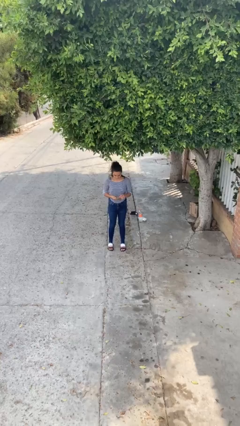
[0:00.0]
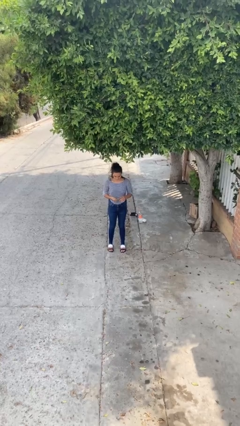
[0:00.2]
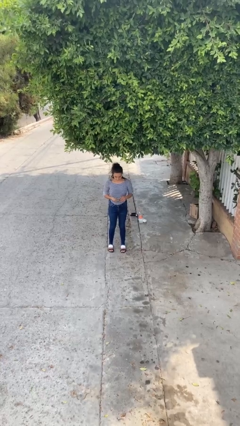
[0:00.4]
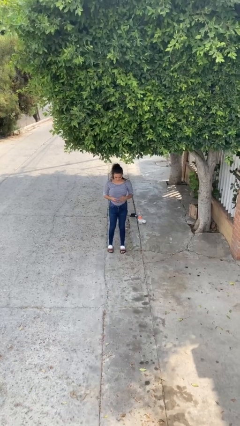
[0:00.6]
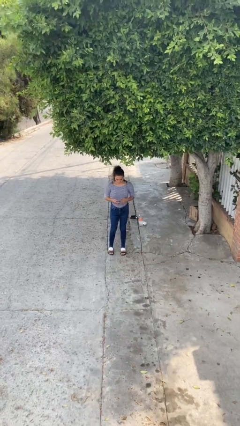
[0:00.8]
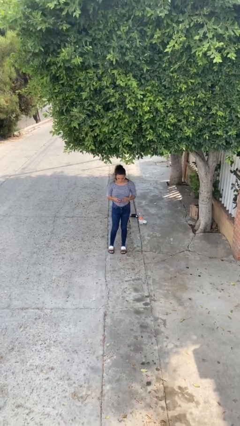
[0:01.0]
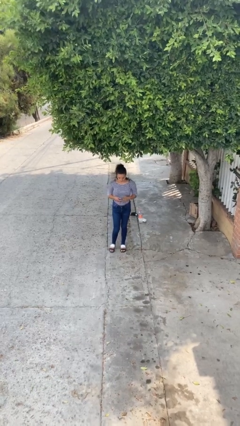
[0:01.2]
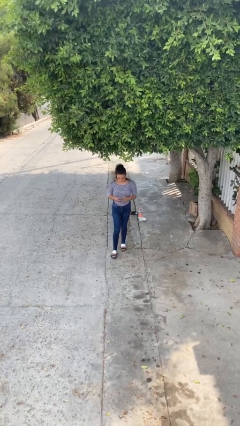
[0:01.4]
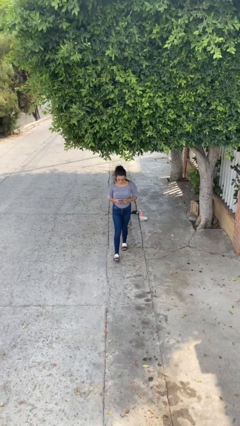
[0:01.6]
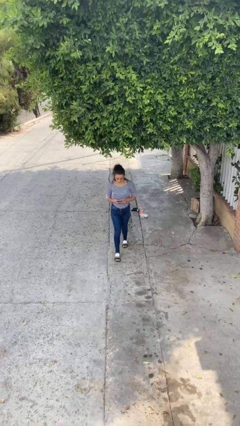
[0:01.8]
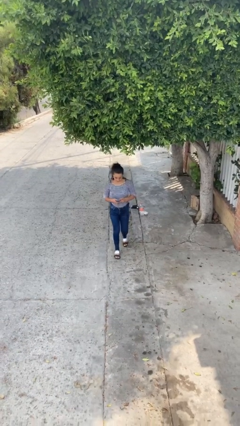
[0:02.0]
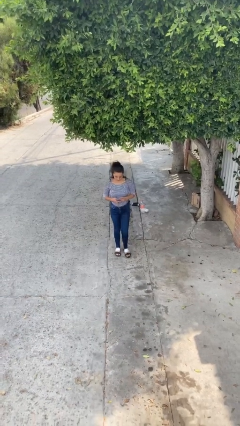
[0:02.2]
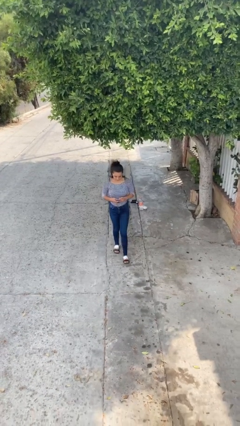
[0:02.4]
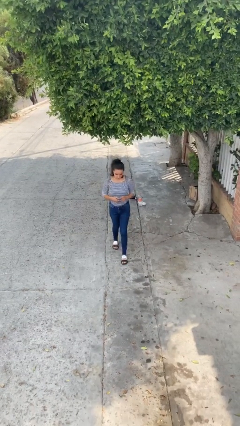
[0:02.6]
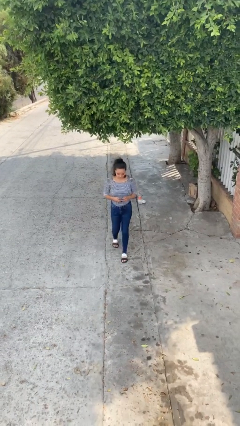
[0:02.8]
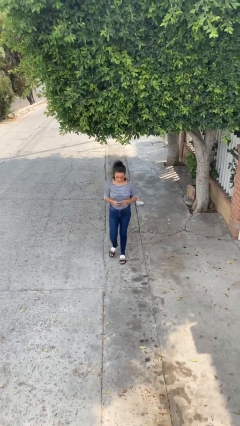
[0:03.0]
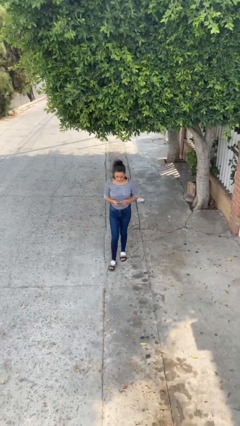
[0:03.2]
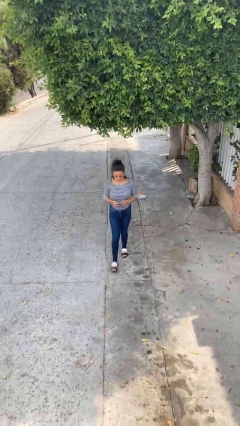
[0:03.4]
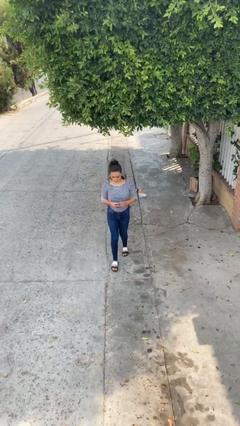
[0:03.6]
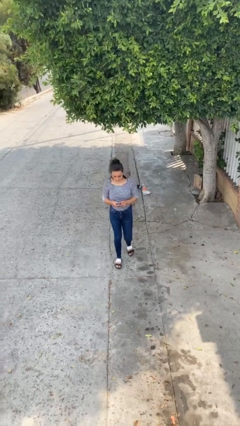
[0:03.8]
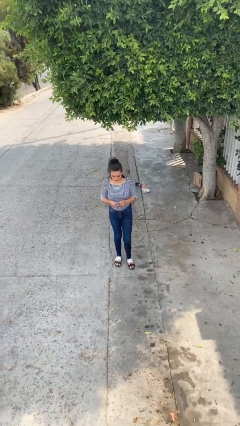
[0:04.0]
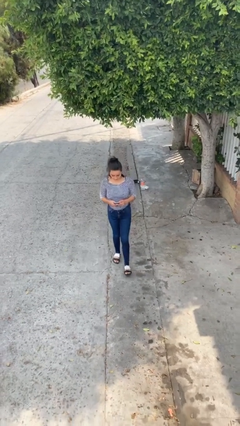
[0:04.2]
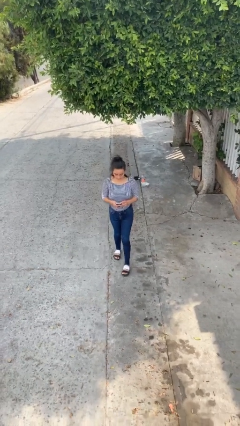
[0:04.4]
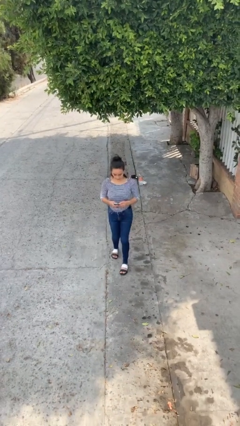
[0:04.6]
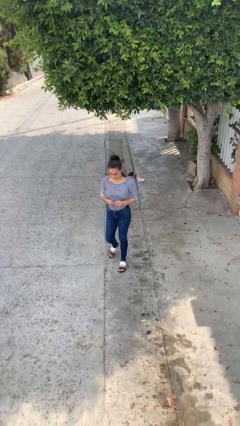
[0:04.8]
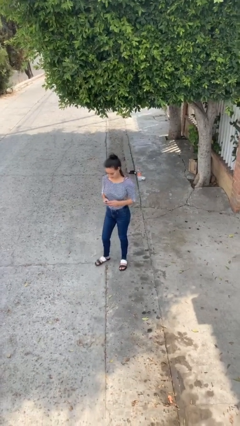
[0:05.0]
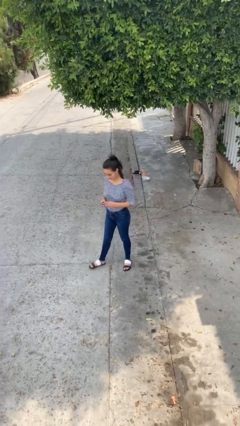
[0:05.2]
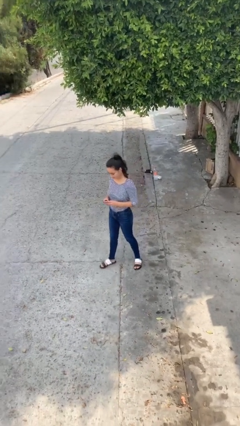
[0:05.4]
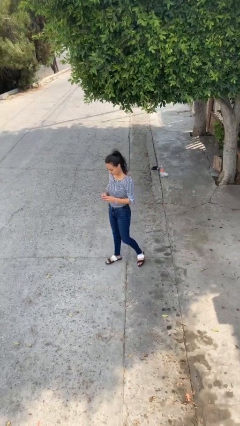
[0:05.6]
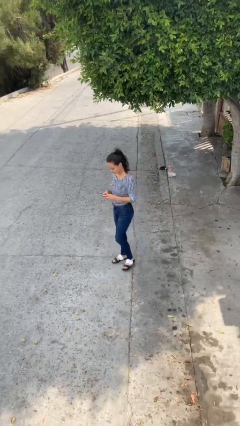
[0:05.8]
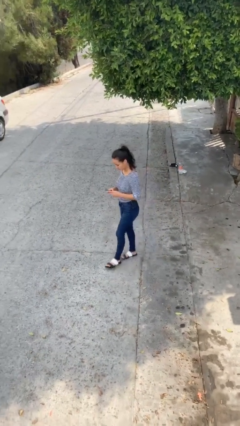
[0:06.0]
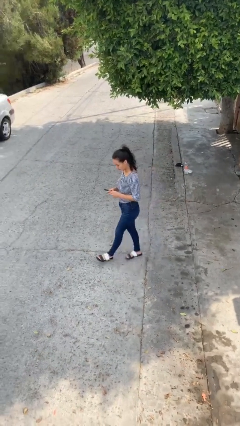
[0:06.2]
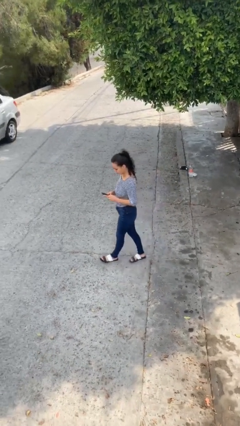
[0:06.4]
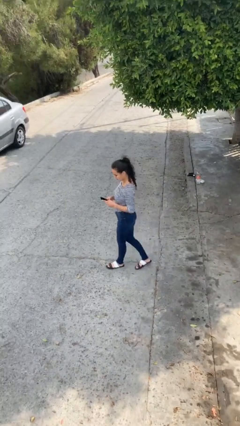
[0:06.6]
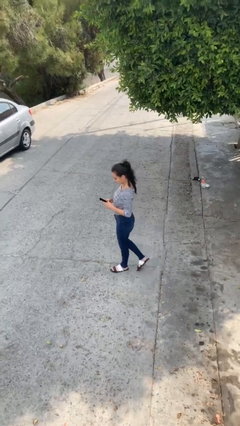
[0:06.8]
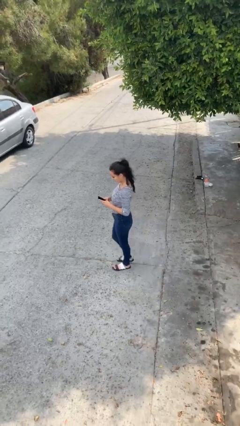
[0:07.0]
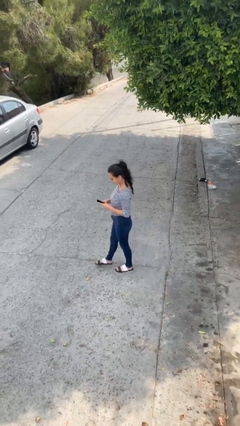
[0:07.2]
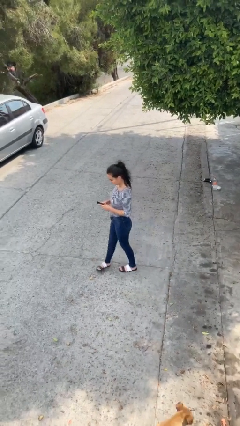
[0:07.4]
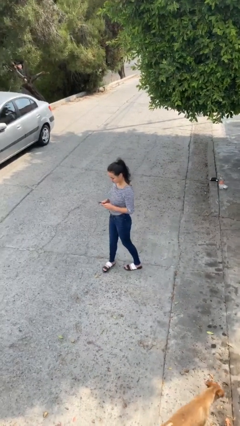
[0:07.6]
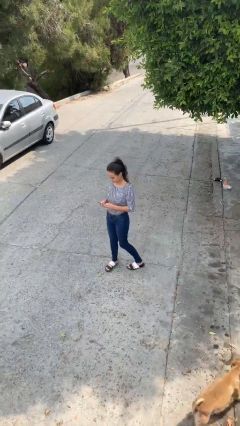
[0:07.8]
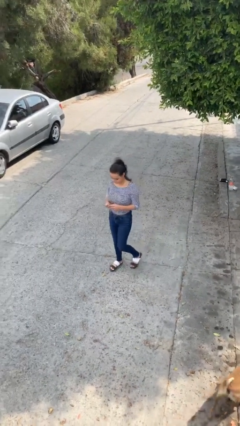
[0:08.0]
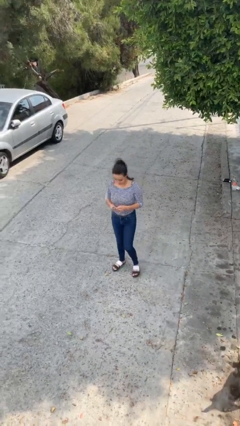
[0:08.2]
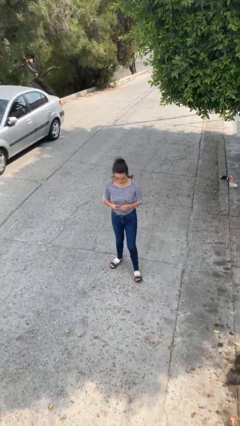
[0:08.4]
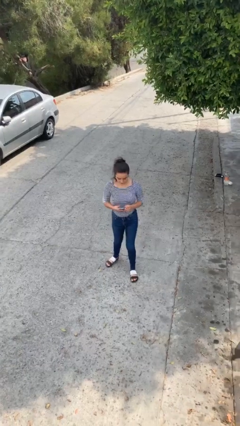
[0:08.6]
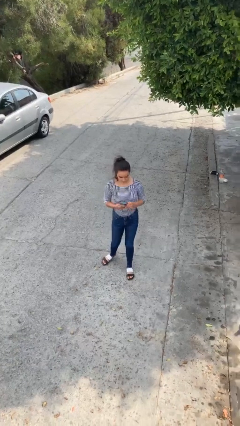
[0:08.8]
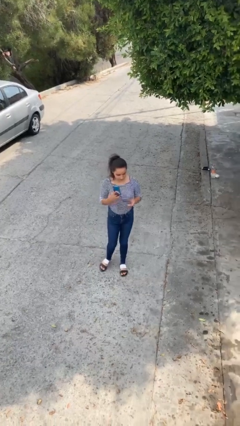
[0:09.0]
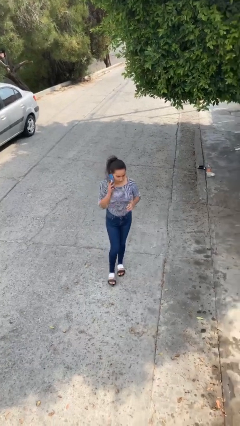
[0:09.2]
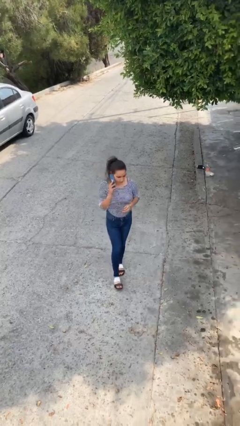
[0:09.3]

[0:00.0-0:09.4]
person texts on phone

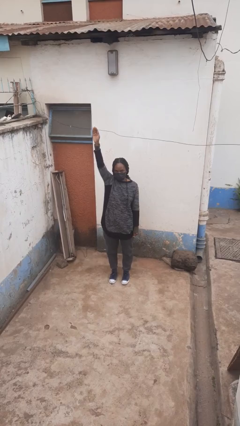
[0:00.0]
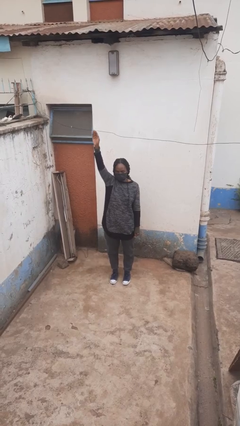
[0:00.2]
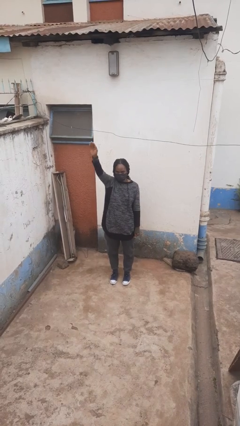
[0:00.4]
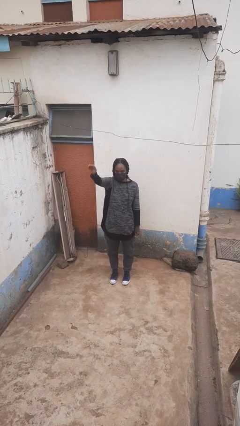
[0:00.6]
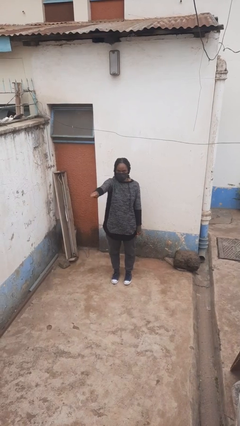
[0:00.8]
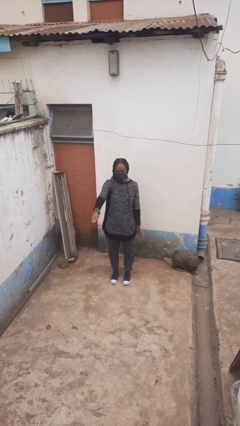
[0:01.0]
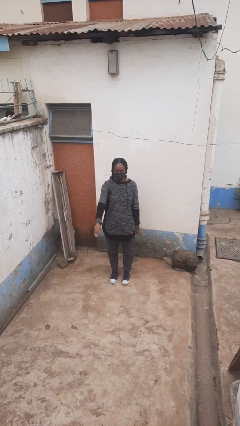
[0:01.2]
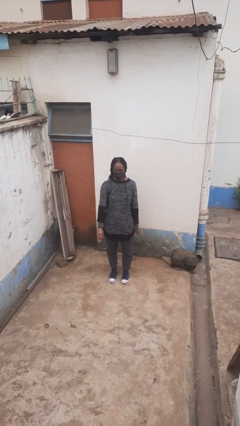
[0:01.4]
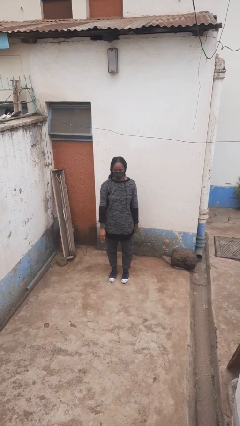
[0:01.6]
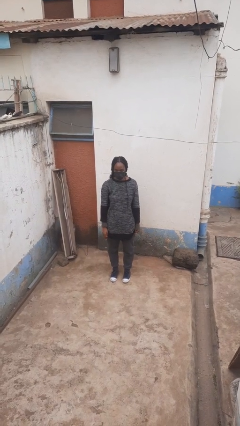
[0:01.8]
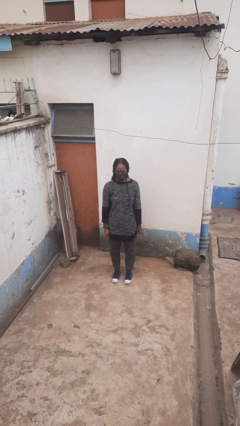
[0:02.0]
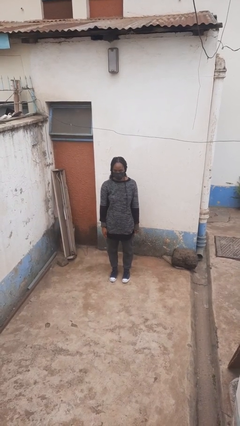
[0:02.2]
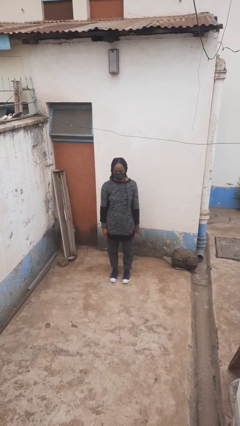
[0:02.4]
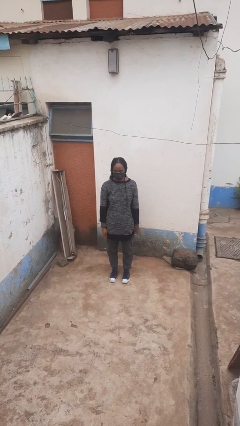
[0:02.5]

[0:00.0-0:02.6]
person gestures lower hand

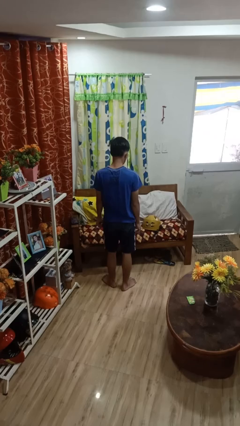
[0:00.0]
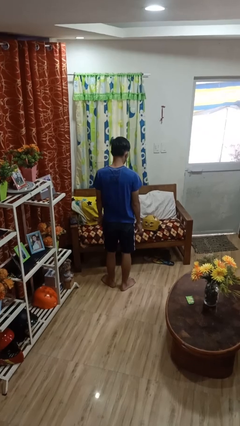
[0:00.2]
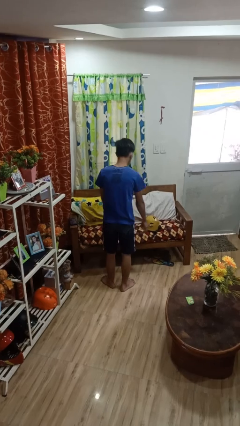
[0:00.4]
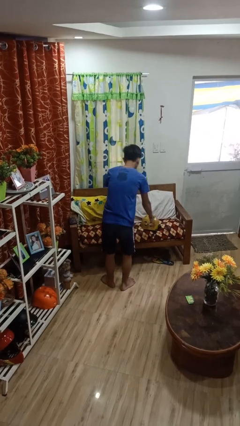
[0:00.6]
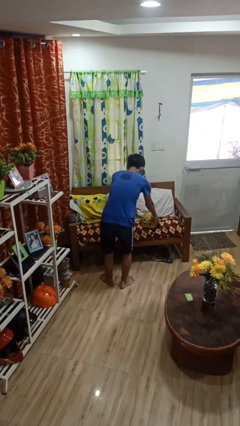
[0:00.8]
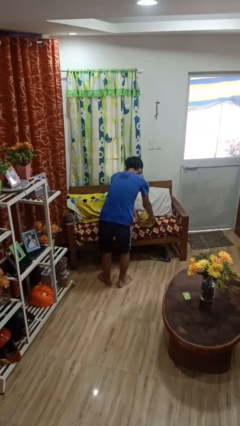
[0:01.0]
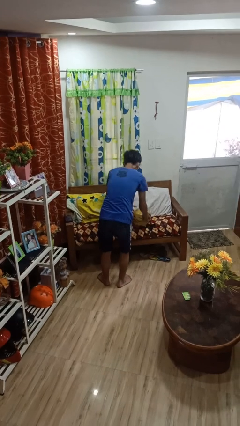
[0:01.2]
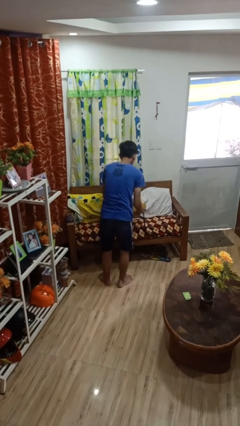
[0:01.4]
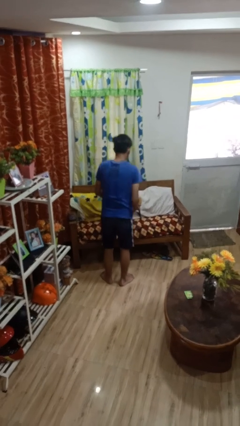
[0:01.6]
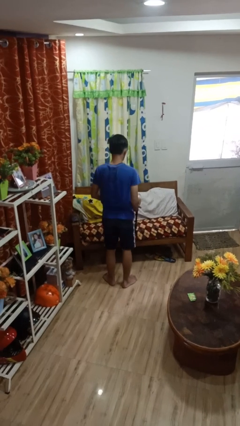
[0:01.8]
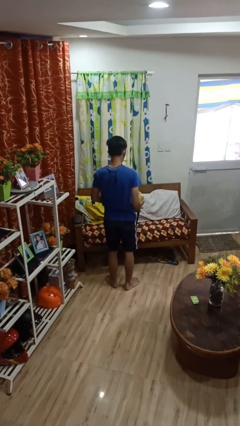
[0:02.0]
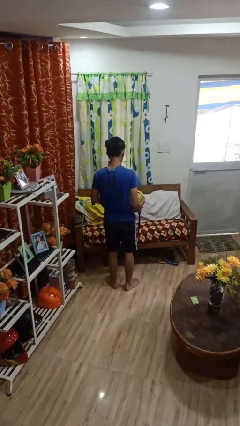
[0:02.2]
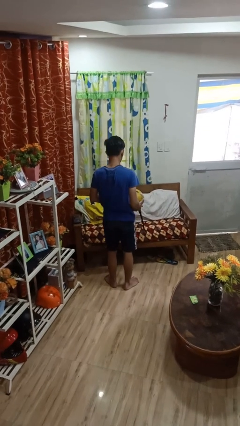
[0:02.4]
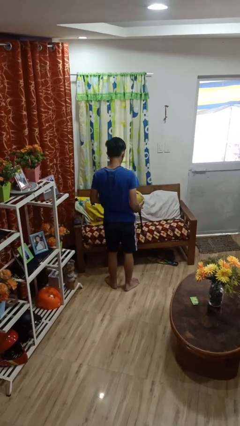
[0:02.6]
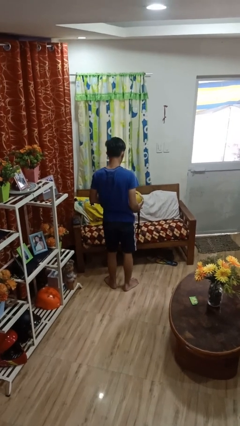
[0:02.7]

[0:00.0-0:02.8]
person picks up object from couch

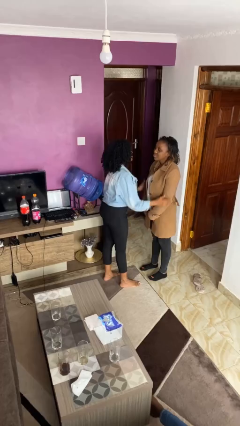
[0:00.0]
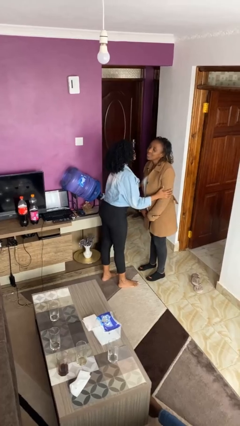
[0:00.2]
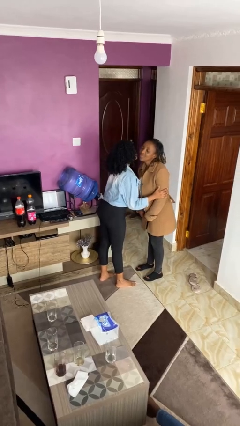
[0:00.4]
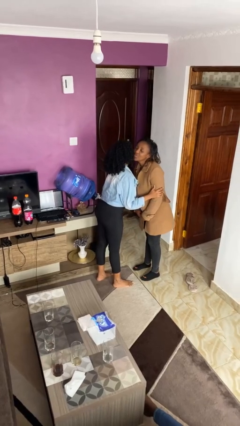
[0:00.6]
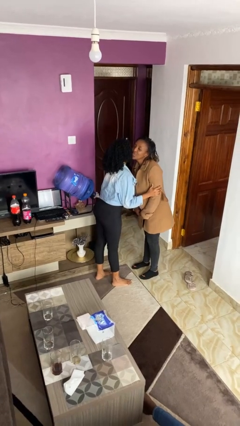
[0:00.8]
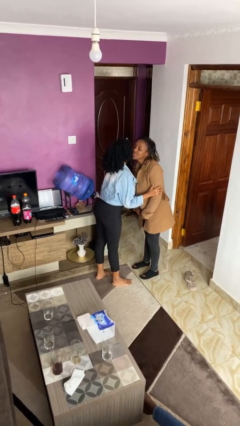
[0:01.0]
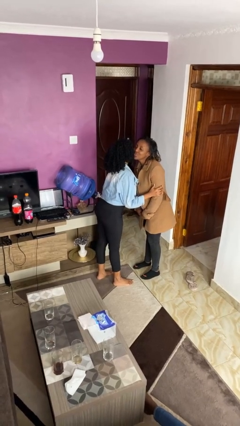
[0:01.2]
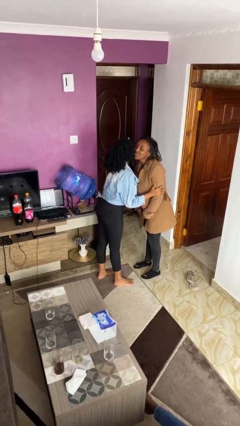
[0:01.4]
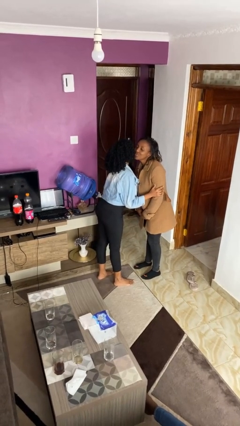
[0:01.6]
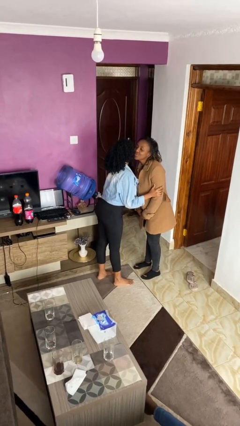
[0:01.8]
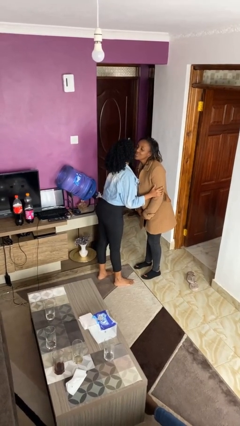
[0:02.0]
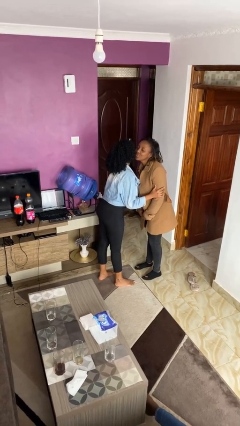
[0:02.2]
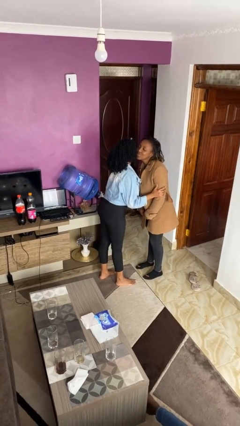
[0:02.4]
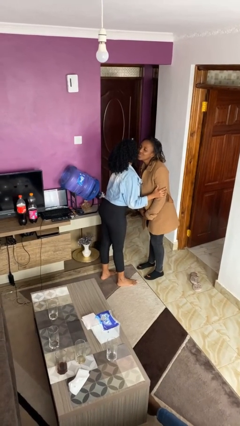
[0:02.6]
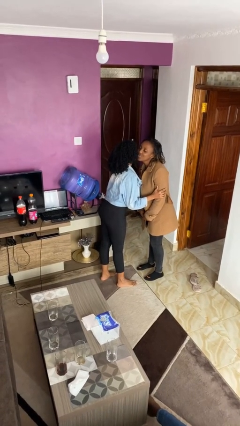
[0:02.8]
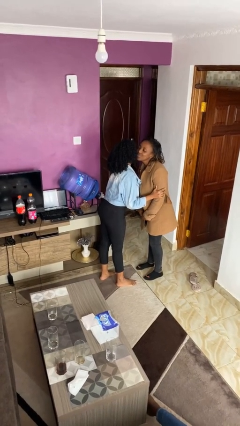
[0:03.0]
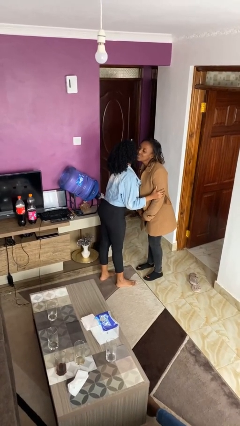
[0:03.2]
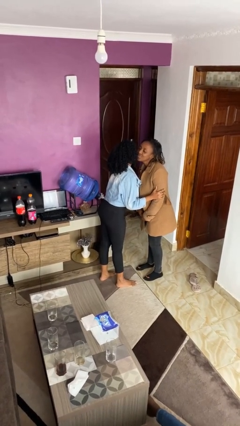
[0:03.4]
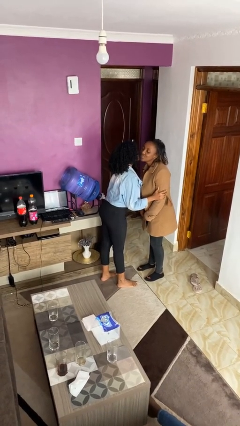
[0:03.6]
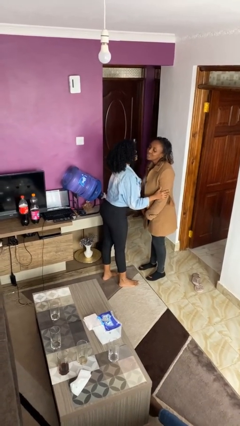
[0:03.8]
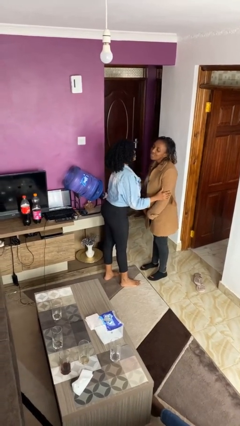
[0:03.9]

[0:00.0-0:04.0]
person kisses cheek of person
